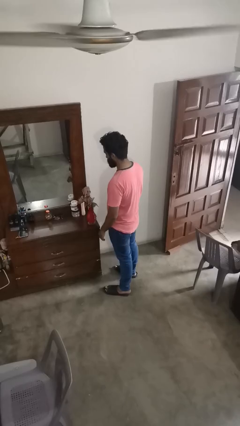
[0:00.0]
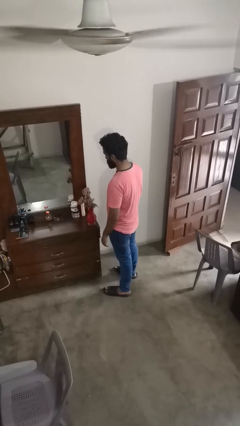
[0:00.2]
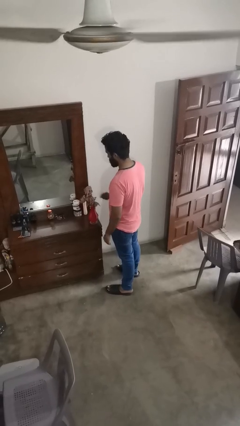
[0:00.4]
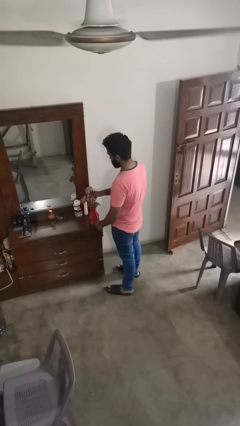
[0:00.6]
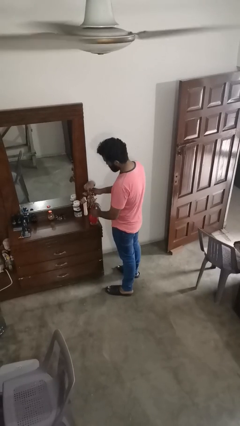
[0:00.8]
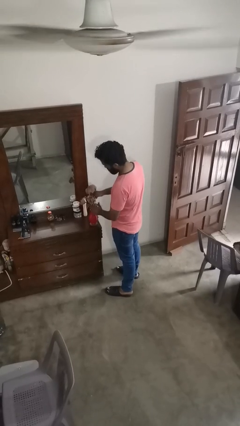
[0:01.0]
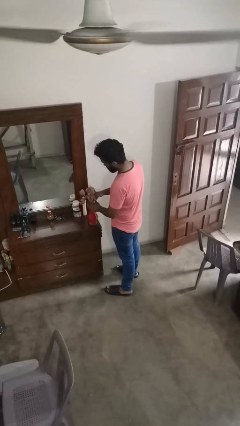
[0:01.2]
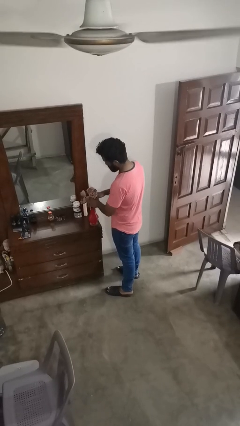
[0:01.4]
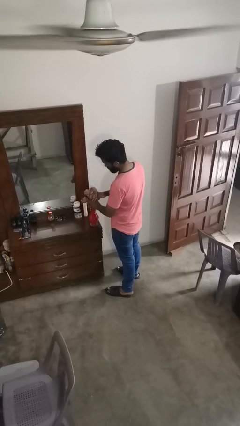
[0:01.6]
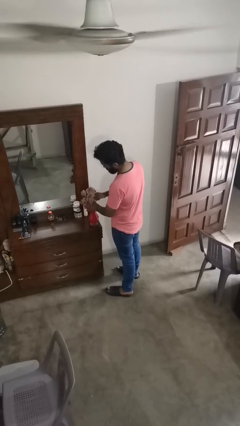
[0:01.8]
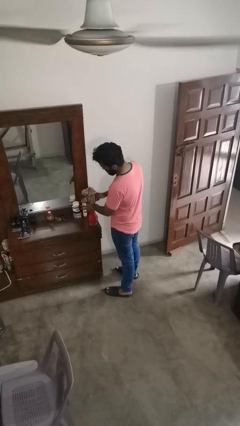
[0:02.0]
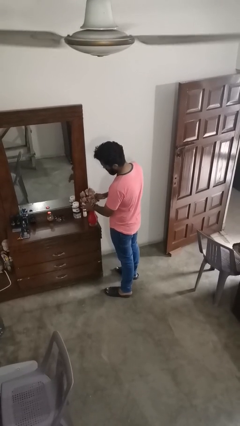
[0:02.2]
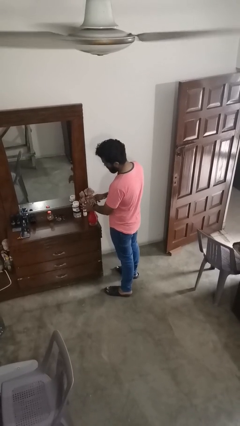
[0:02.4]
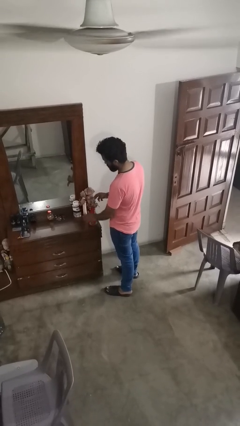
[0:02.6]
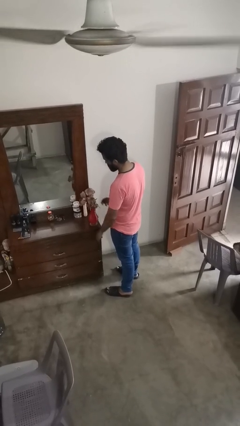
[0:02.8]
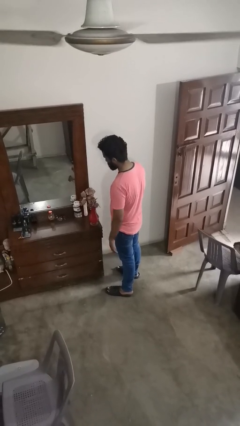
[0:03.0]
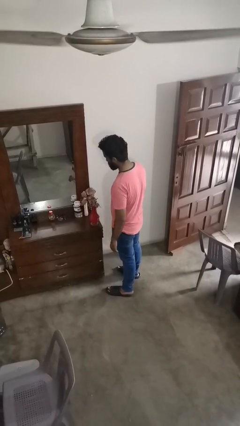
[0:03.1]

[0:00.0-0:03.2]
person arranges flowers in vase

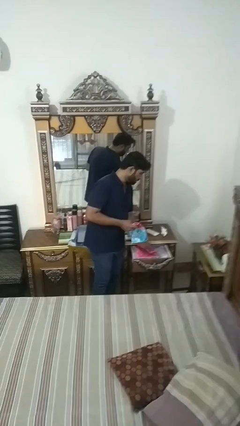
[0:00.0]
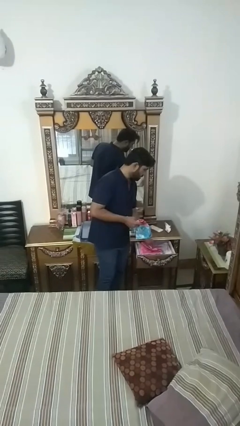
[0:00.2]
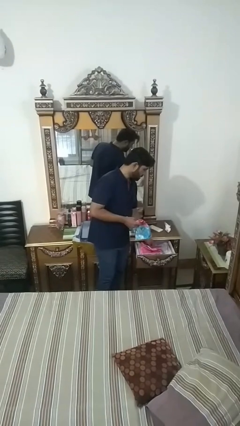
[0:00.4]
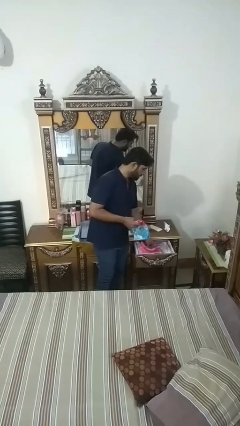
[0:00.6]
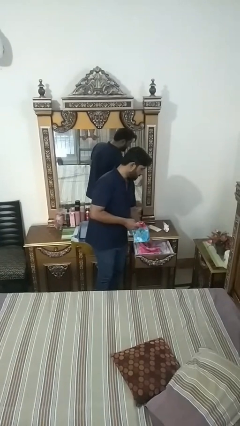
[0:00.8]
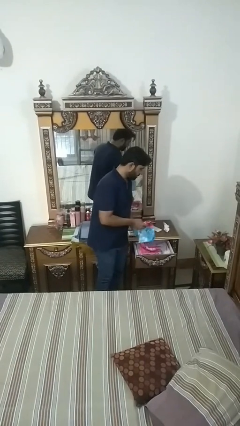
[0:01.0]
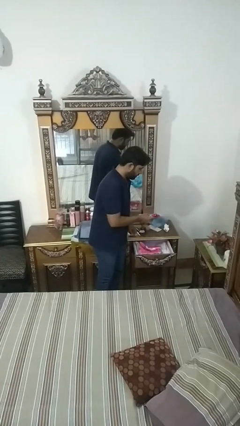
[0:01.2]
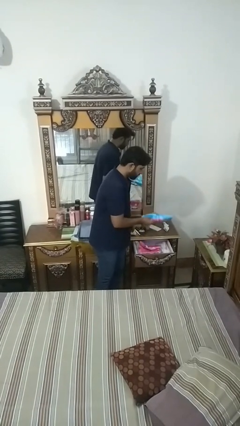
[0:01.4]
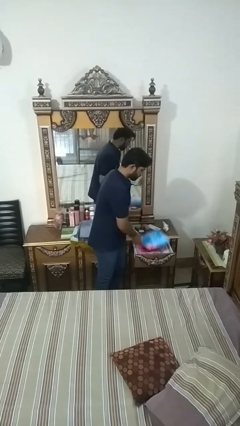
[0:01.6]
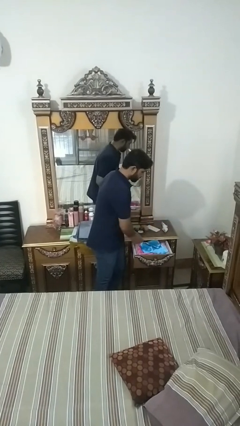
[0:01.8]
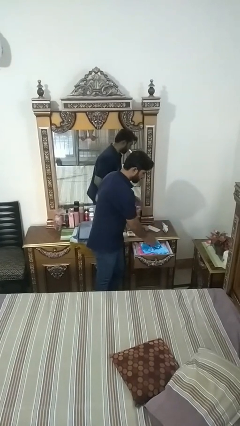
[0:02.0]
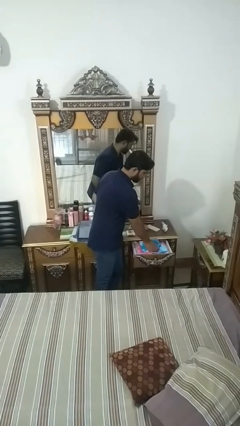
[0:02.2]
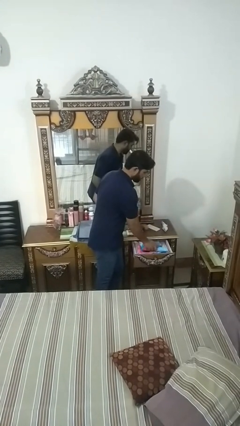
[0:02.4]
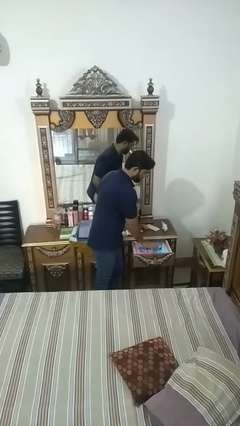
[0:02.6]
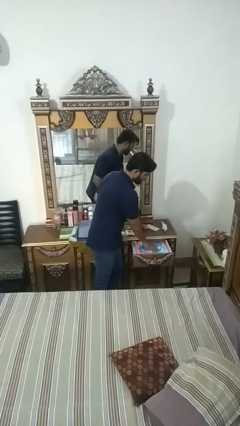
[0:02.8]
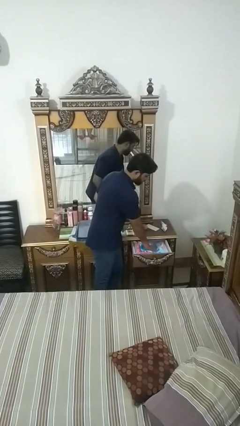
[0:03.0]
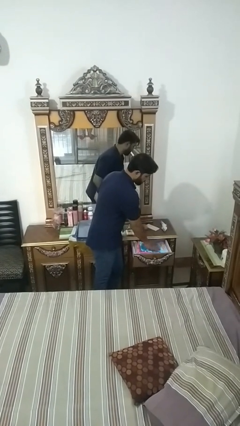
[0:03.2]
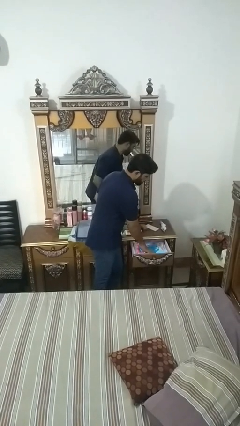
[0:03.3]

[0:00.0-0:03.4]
person puts clothes into dresser

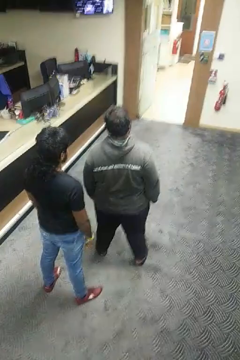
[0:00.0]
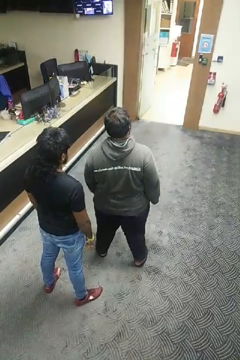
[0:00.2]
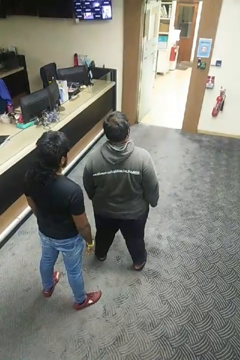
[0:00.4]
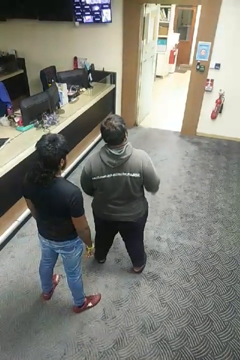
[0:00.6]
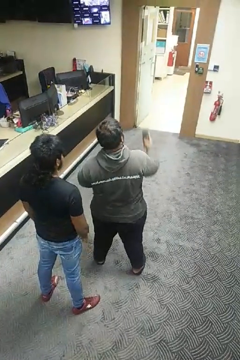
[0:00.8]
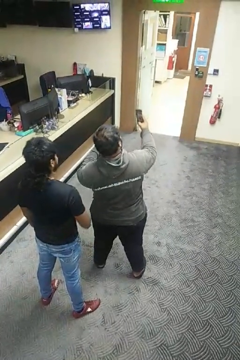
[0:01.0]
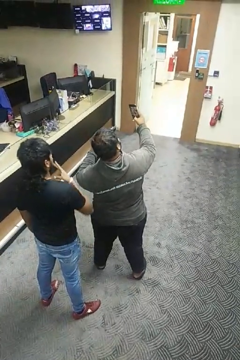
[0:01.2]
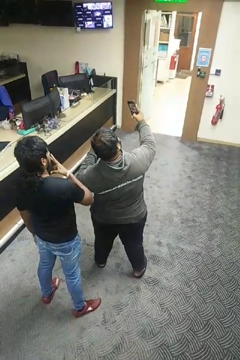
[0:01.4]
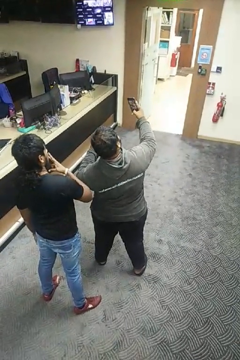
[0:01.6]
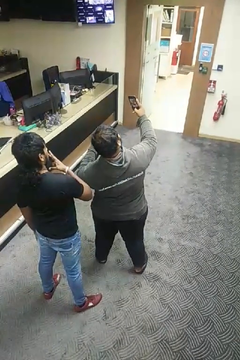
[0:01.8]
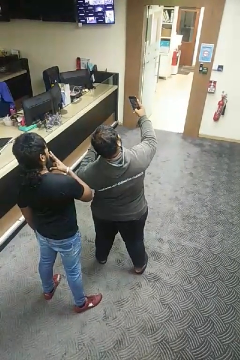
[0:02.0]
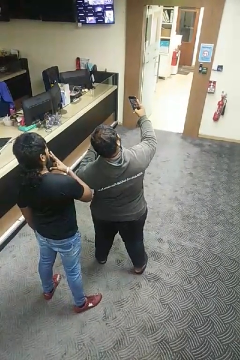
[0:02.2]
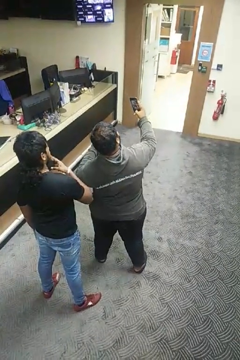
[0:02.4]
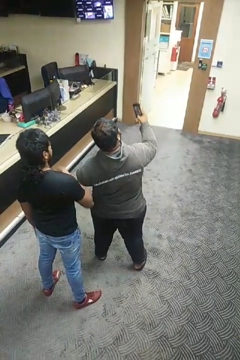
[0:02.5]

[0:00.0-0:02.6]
person takes selfie with person

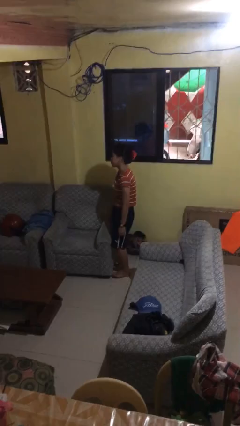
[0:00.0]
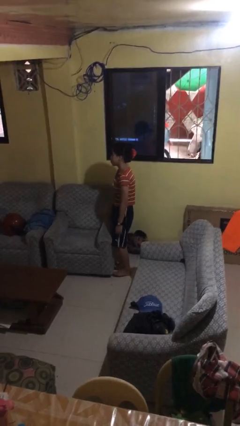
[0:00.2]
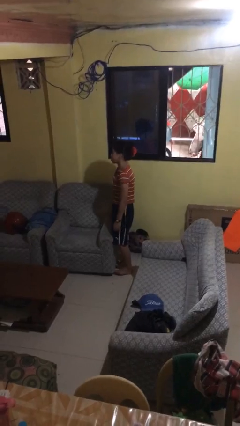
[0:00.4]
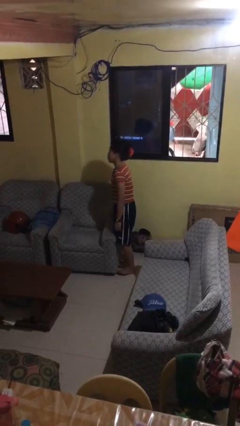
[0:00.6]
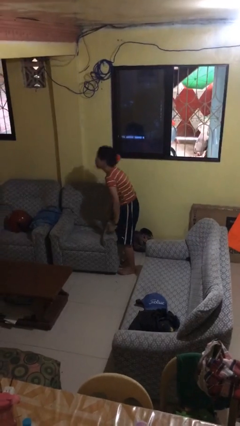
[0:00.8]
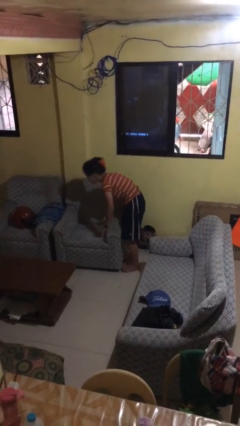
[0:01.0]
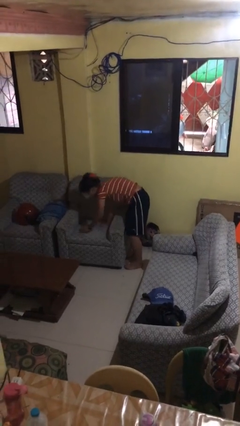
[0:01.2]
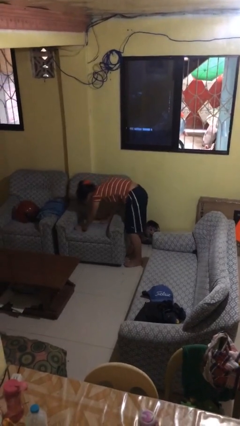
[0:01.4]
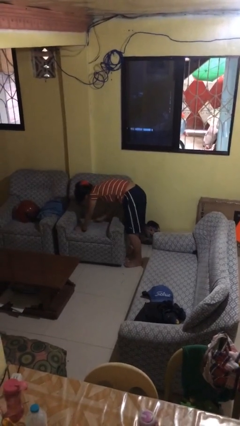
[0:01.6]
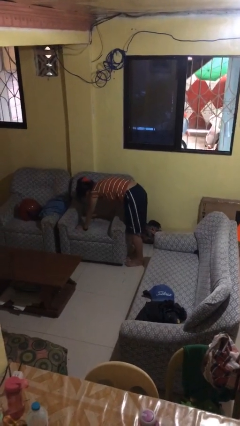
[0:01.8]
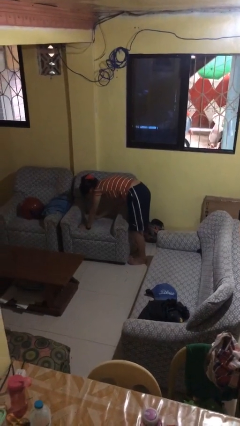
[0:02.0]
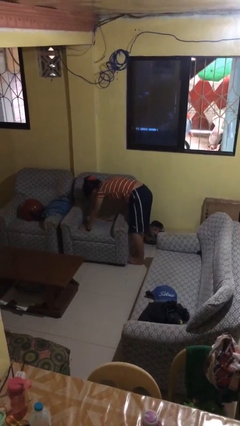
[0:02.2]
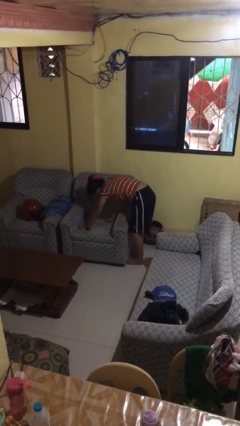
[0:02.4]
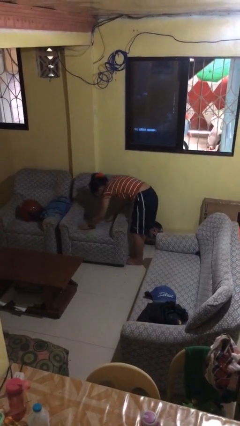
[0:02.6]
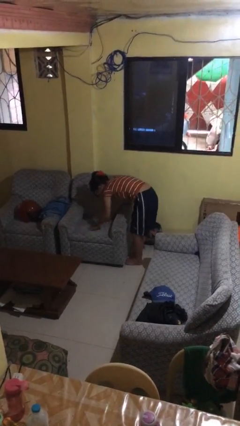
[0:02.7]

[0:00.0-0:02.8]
person searches in couch

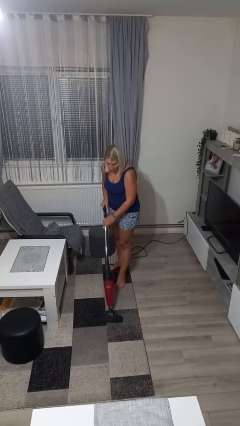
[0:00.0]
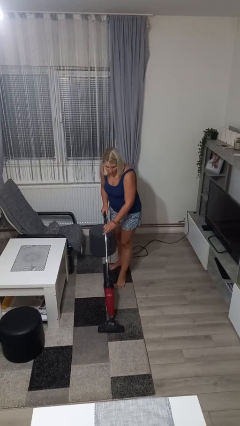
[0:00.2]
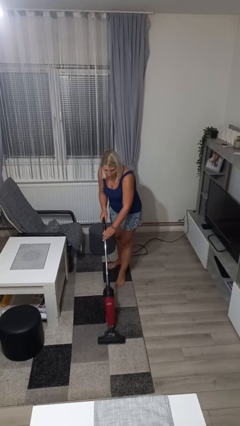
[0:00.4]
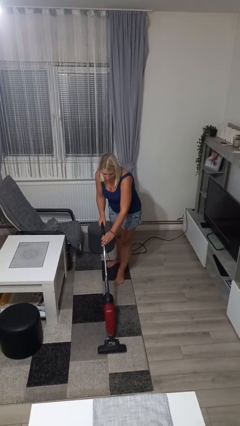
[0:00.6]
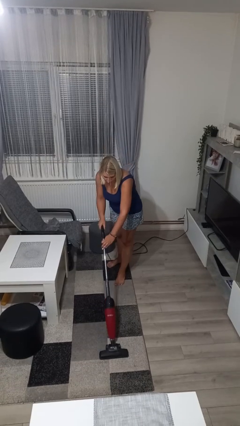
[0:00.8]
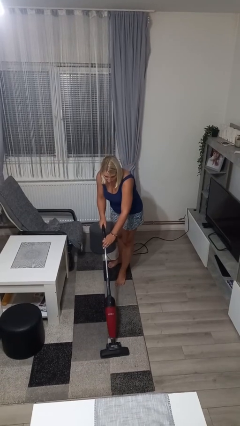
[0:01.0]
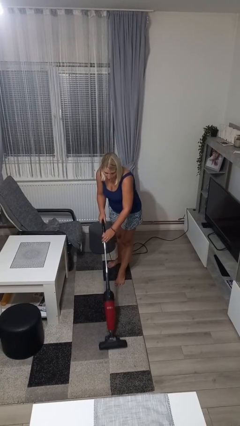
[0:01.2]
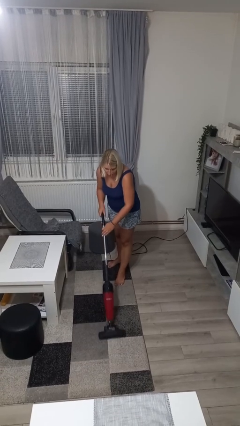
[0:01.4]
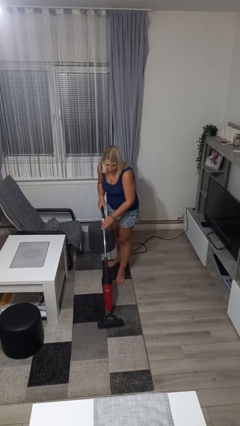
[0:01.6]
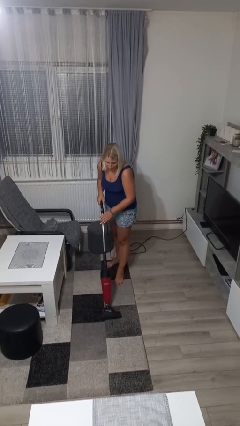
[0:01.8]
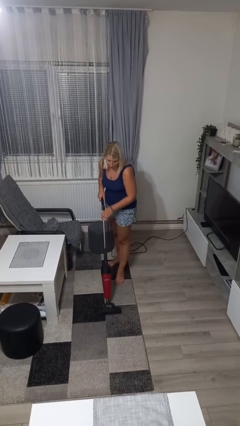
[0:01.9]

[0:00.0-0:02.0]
person vacuums carpet

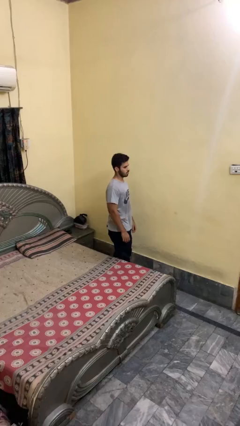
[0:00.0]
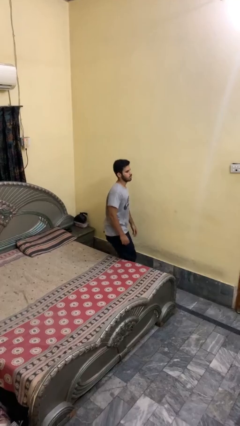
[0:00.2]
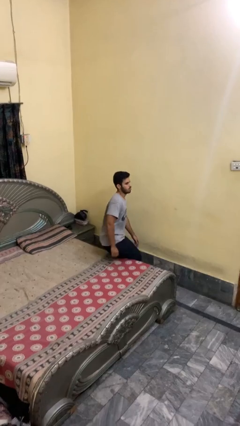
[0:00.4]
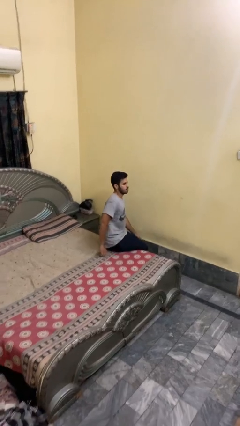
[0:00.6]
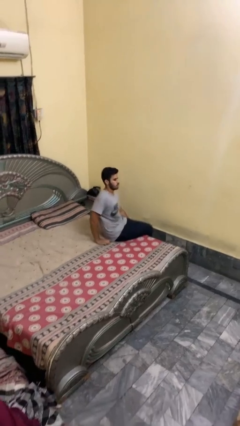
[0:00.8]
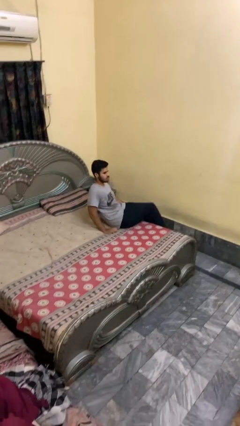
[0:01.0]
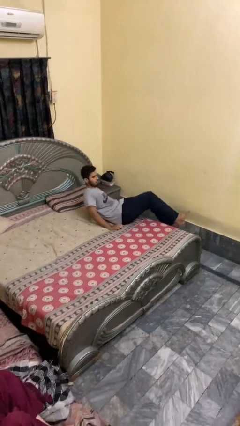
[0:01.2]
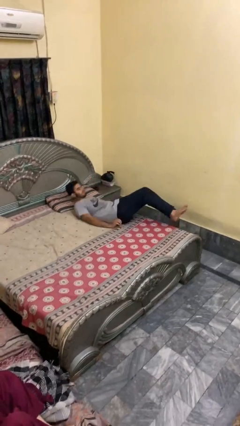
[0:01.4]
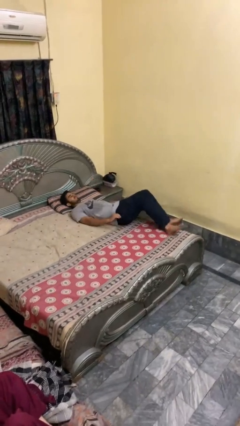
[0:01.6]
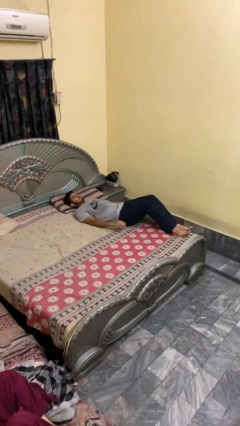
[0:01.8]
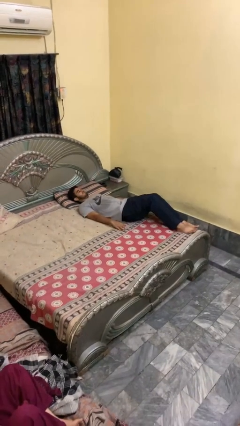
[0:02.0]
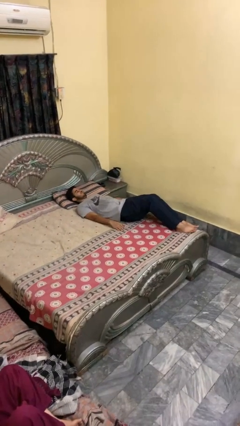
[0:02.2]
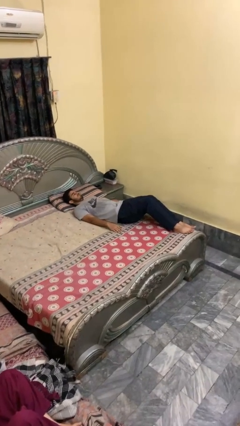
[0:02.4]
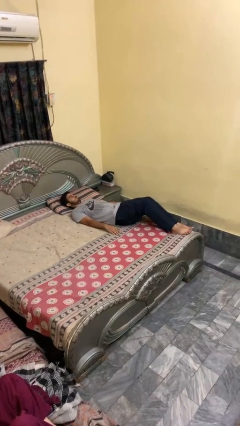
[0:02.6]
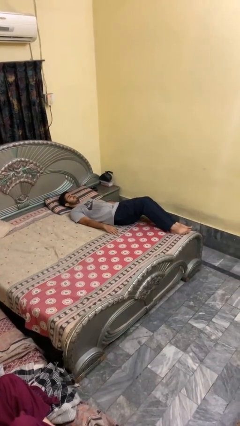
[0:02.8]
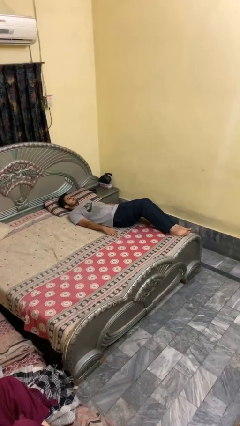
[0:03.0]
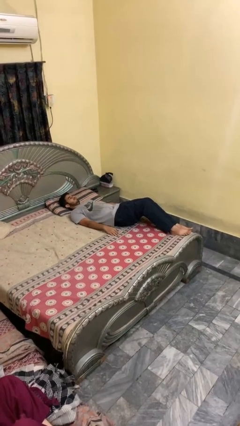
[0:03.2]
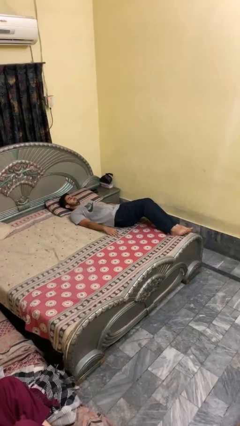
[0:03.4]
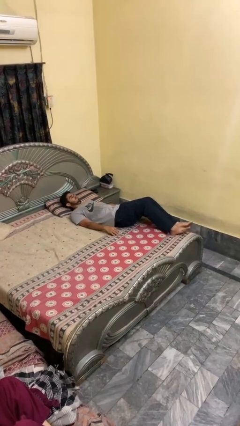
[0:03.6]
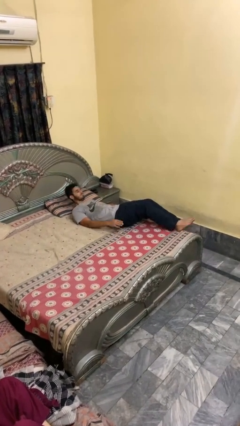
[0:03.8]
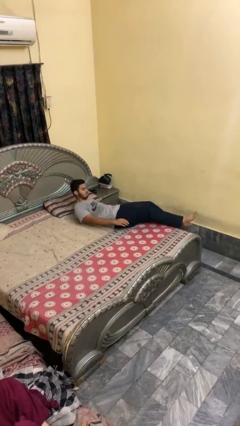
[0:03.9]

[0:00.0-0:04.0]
person lies down on bed
